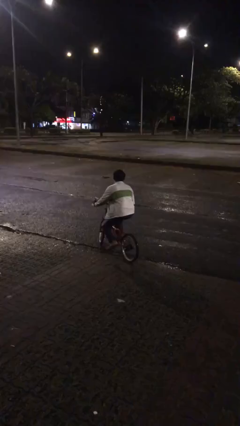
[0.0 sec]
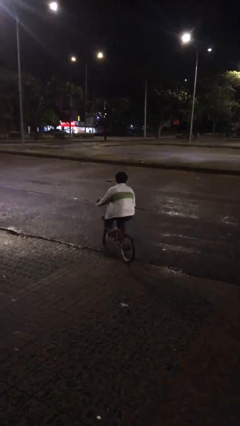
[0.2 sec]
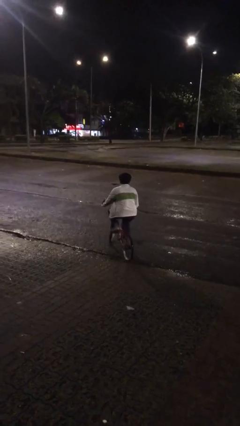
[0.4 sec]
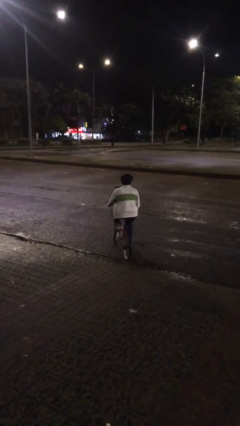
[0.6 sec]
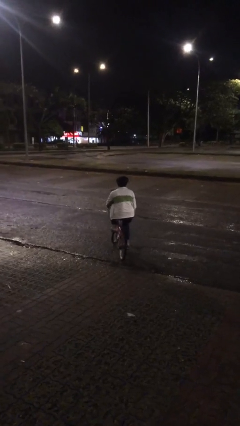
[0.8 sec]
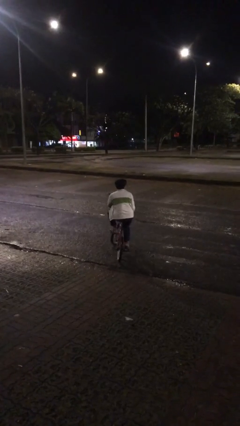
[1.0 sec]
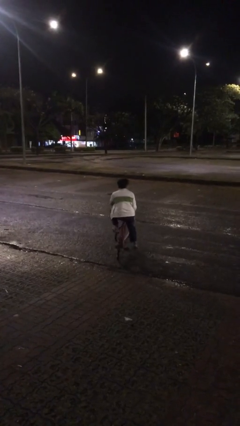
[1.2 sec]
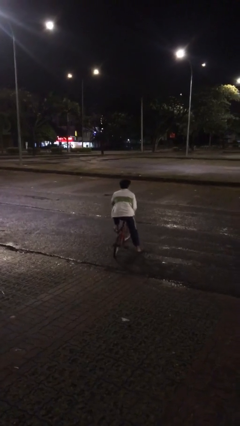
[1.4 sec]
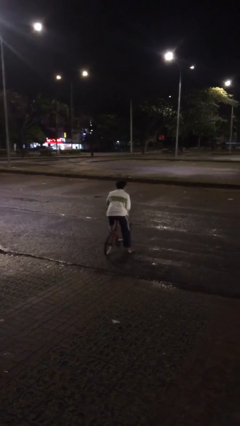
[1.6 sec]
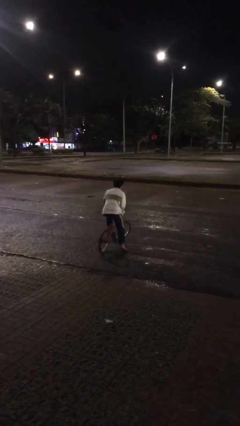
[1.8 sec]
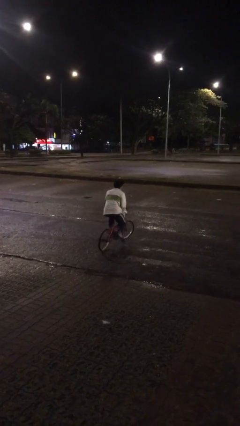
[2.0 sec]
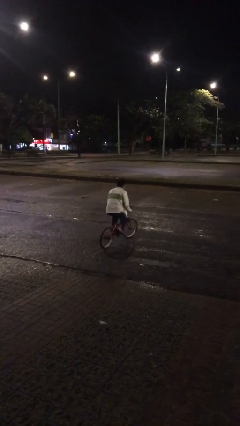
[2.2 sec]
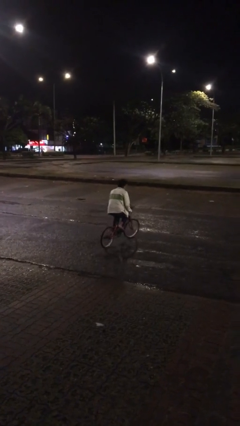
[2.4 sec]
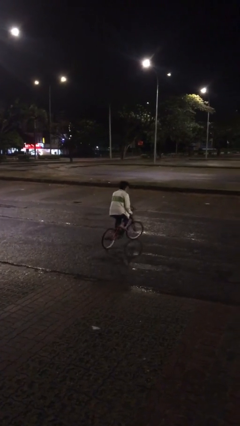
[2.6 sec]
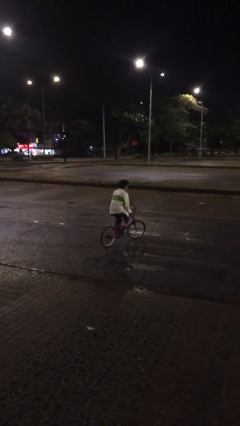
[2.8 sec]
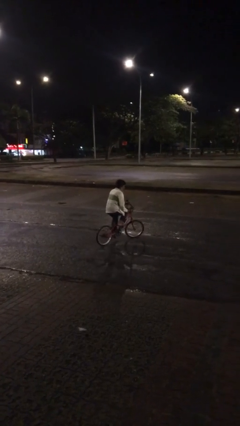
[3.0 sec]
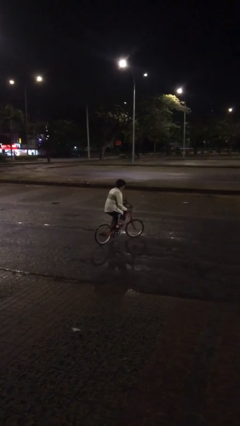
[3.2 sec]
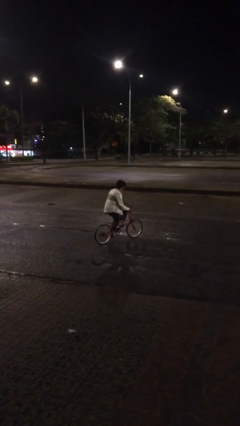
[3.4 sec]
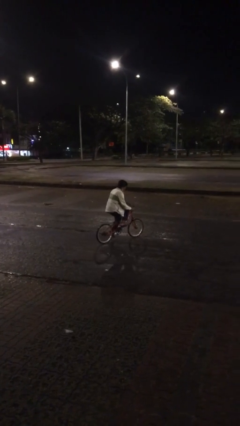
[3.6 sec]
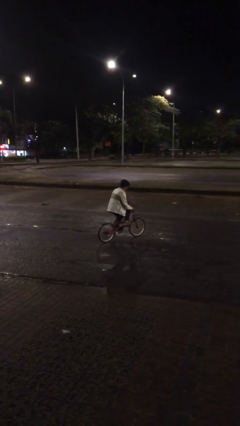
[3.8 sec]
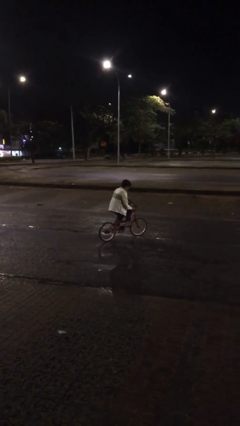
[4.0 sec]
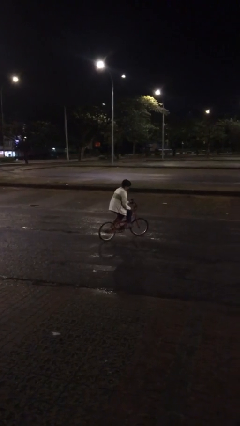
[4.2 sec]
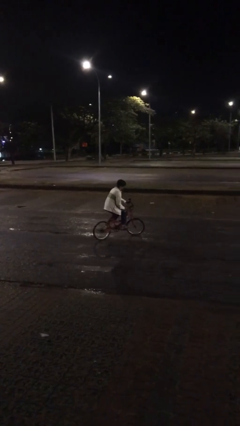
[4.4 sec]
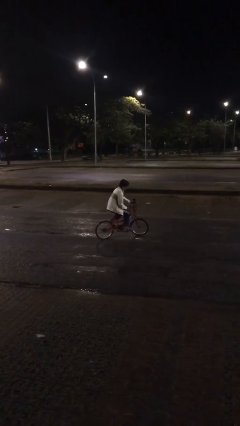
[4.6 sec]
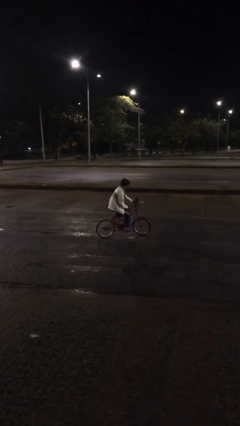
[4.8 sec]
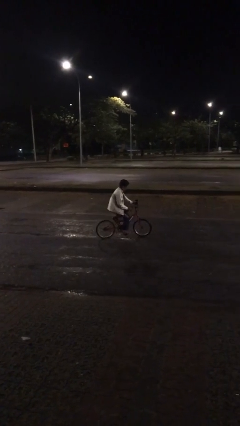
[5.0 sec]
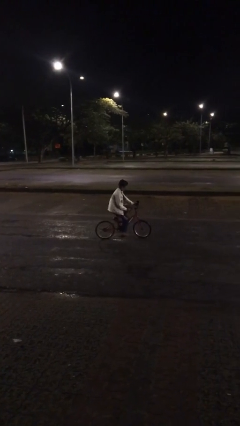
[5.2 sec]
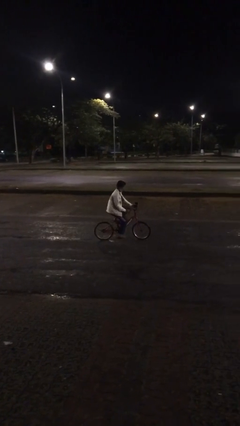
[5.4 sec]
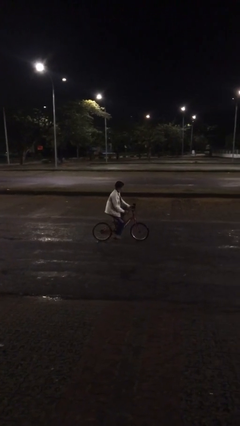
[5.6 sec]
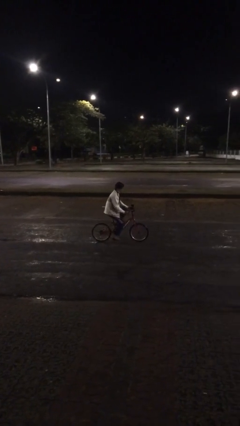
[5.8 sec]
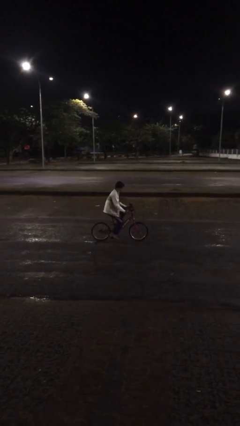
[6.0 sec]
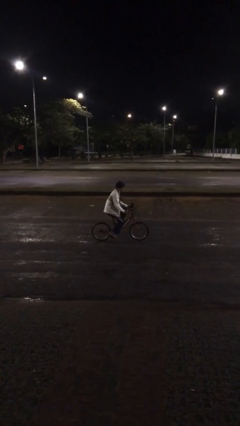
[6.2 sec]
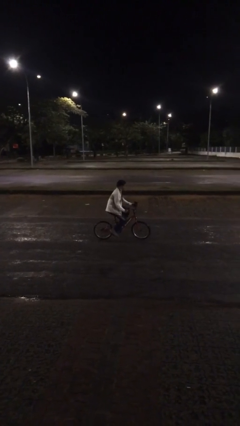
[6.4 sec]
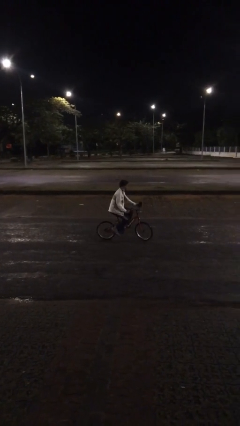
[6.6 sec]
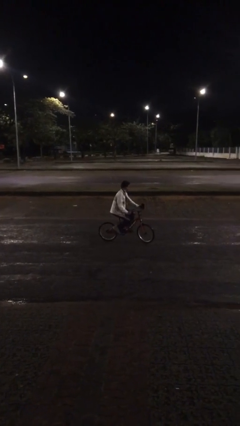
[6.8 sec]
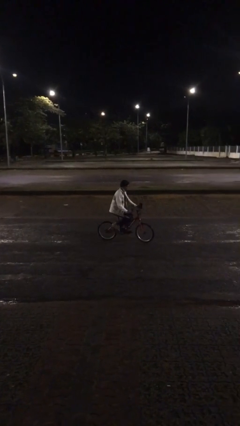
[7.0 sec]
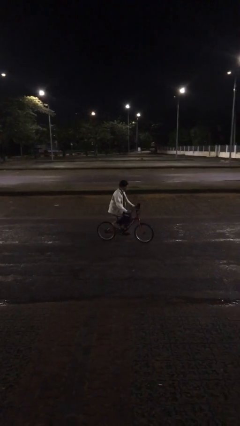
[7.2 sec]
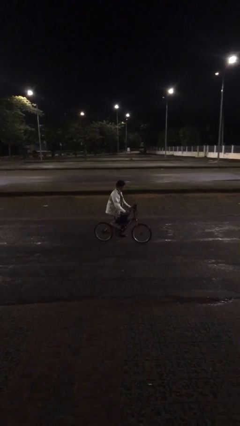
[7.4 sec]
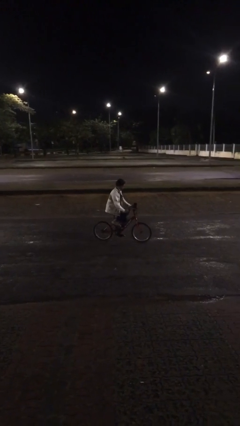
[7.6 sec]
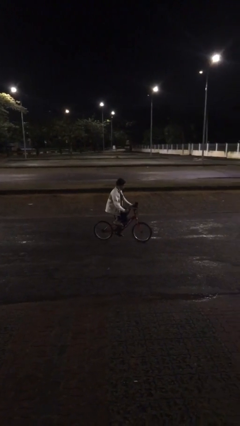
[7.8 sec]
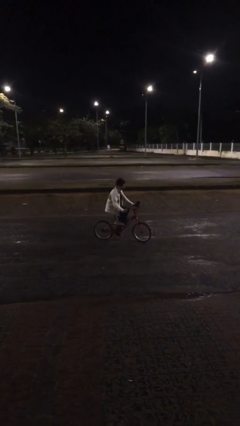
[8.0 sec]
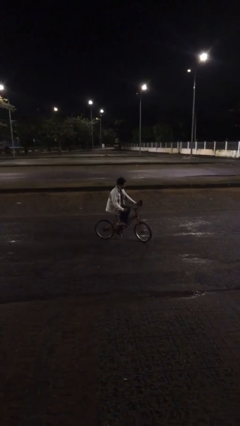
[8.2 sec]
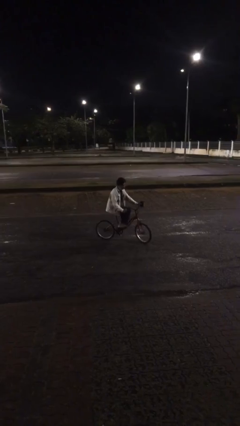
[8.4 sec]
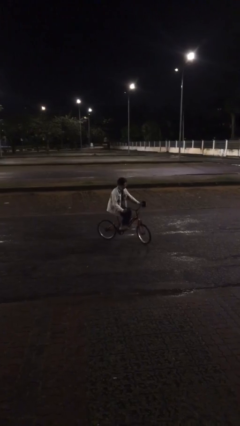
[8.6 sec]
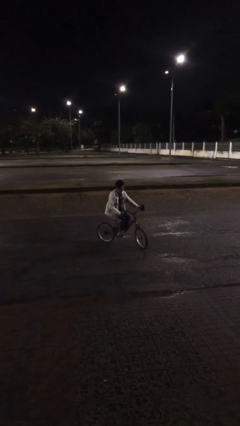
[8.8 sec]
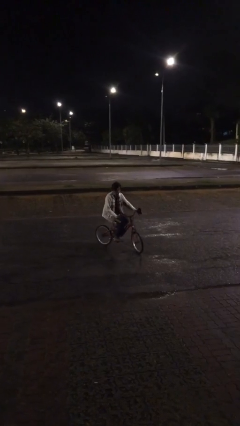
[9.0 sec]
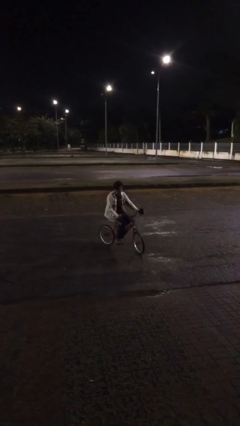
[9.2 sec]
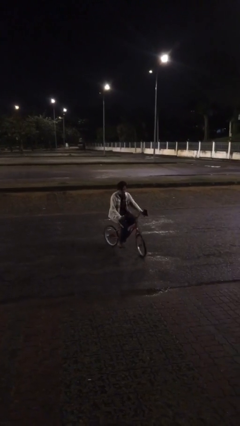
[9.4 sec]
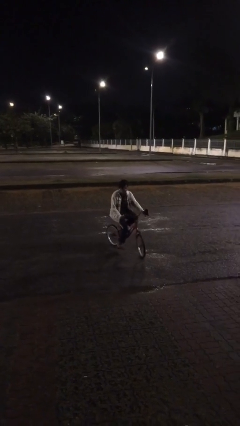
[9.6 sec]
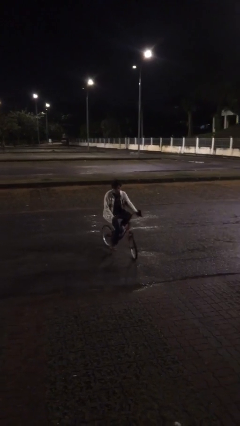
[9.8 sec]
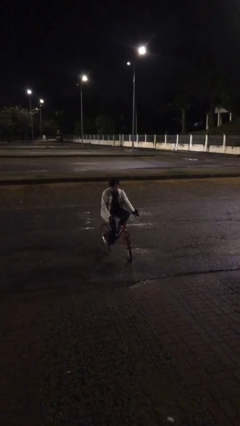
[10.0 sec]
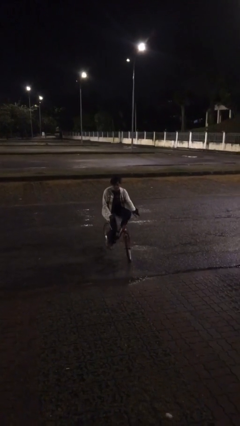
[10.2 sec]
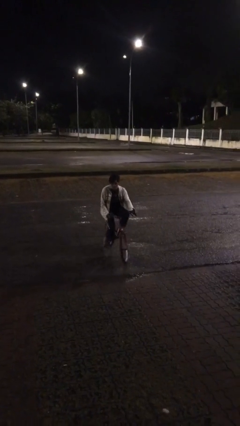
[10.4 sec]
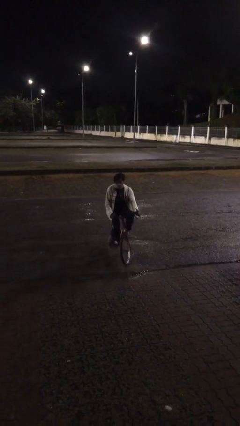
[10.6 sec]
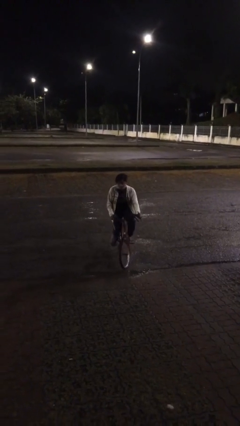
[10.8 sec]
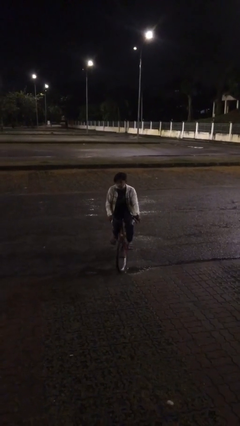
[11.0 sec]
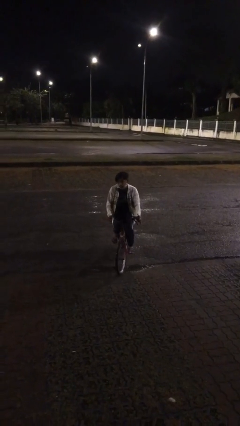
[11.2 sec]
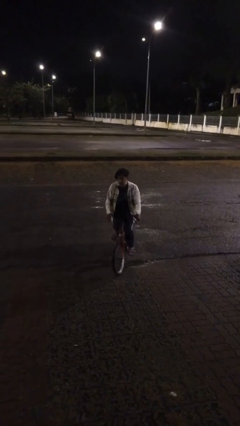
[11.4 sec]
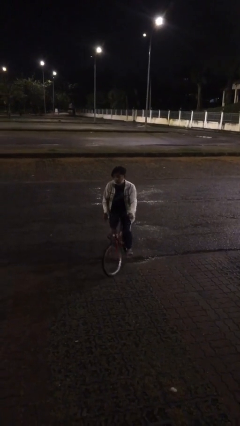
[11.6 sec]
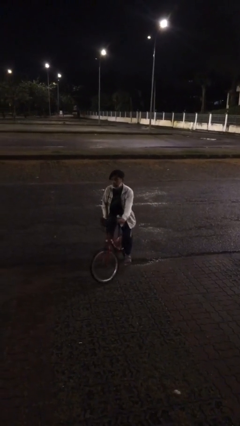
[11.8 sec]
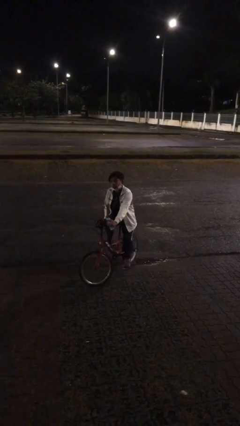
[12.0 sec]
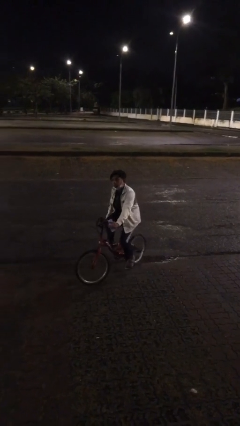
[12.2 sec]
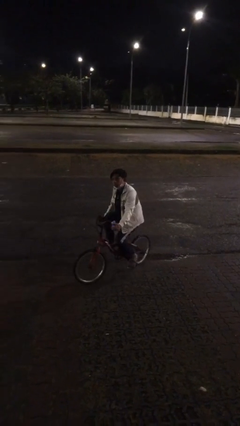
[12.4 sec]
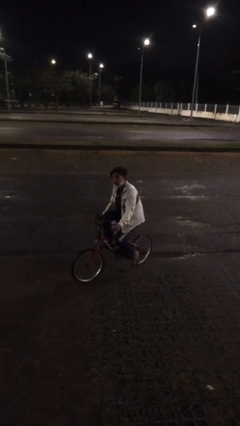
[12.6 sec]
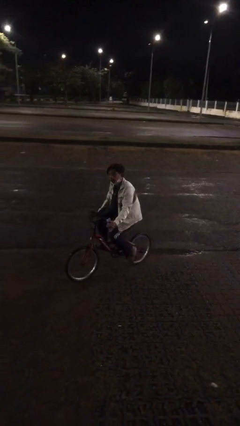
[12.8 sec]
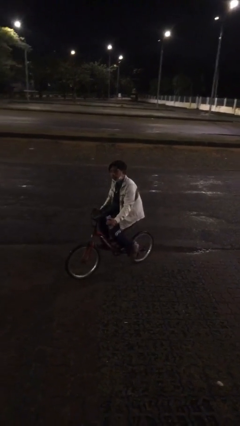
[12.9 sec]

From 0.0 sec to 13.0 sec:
person rides bicycle

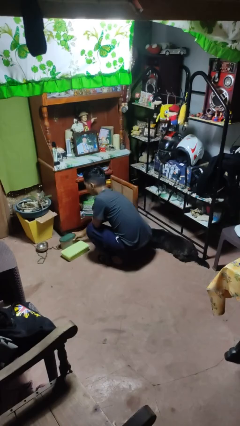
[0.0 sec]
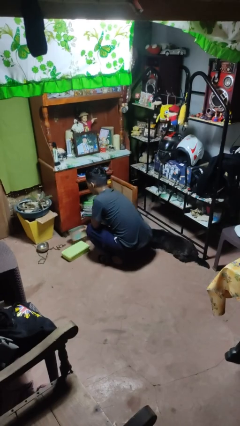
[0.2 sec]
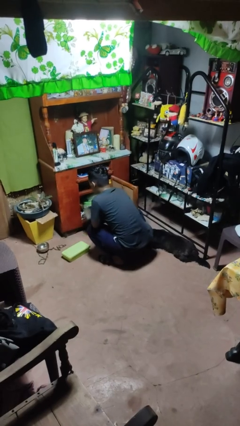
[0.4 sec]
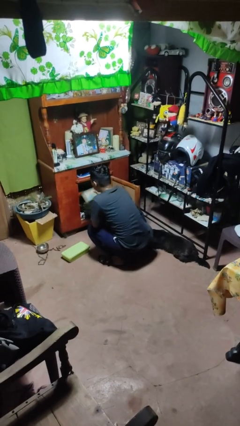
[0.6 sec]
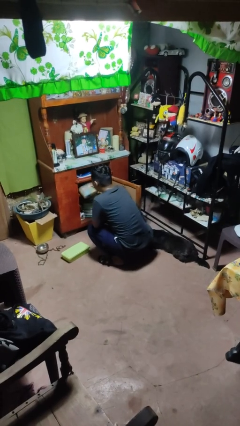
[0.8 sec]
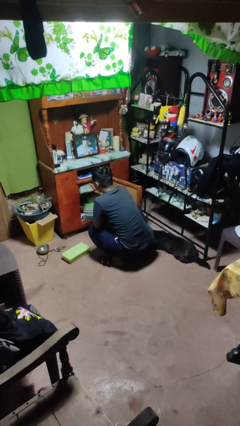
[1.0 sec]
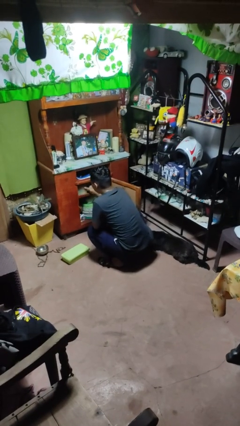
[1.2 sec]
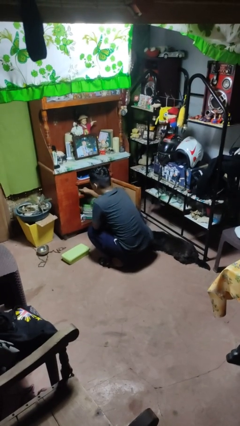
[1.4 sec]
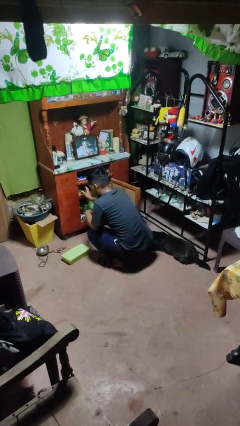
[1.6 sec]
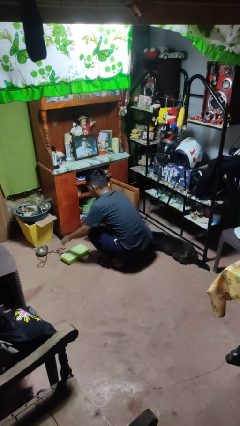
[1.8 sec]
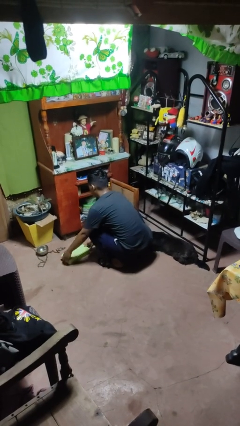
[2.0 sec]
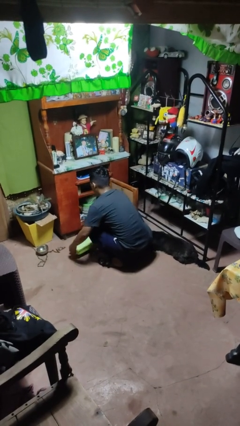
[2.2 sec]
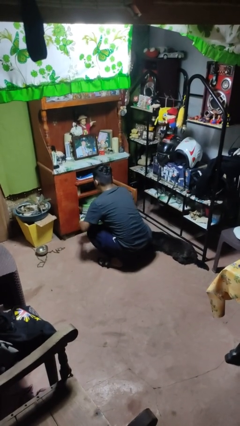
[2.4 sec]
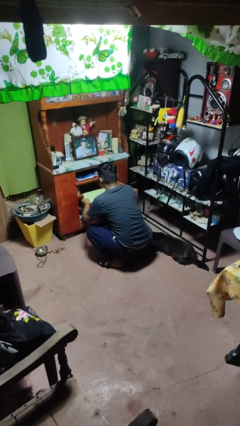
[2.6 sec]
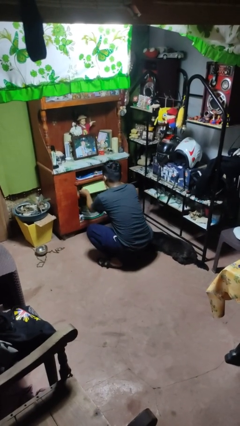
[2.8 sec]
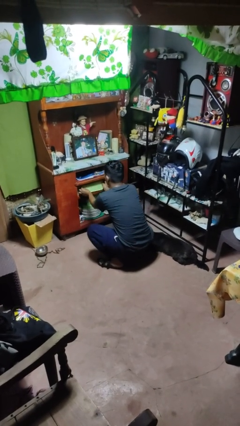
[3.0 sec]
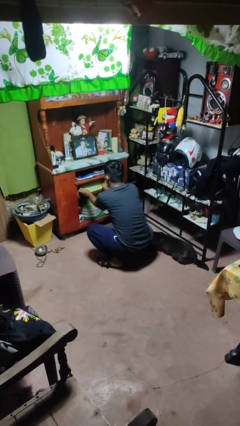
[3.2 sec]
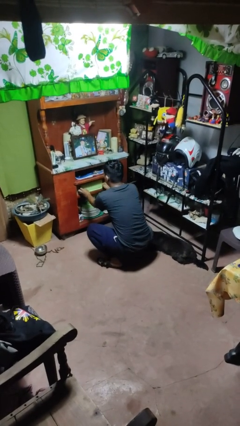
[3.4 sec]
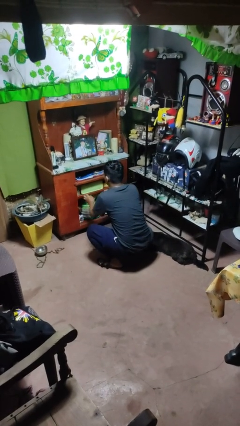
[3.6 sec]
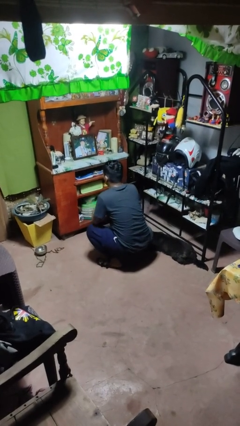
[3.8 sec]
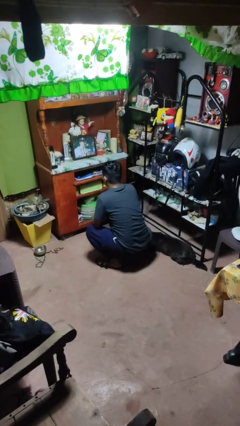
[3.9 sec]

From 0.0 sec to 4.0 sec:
person puts object in cabinet

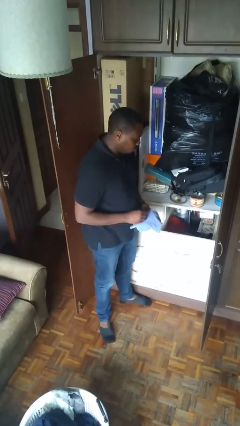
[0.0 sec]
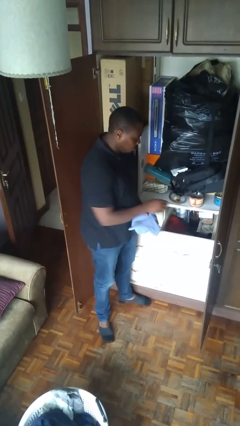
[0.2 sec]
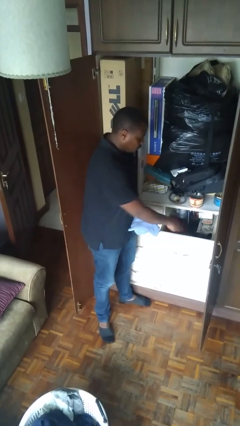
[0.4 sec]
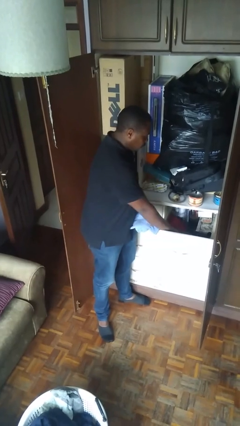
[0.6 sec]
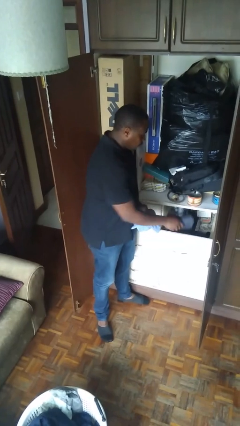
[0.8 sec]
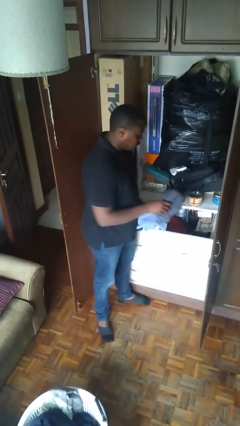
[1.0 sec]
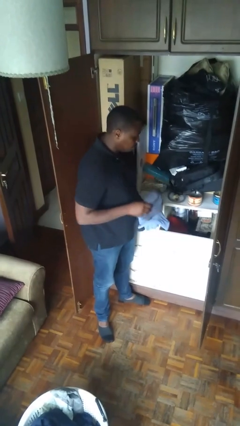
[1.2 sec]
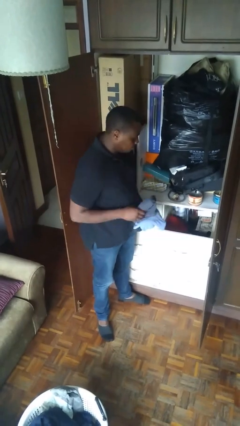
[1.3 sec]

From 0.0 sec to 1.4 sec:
person takes clothes from dresser
